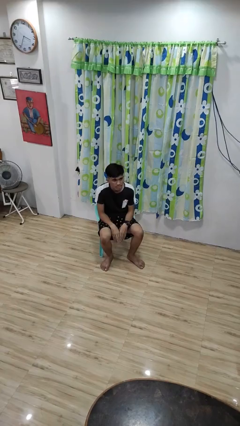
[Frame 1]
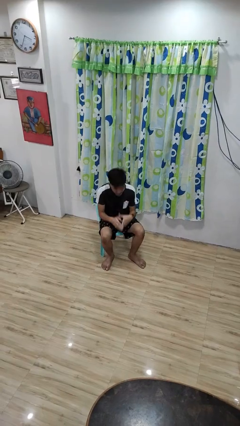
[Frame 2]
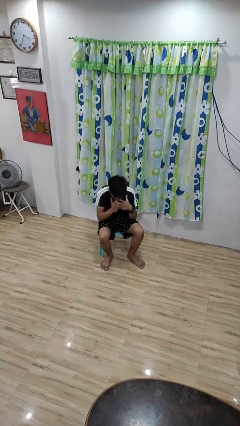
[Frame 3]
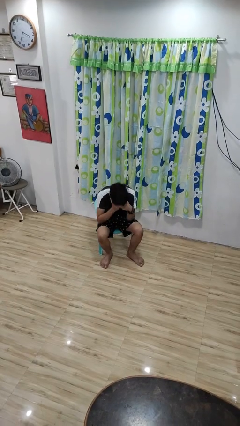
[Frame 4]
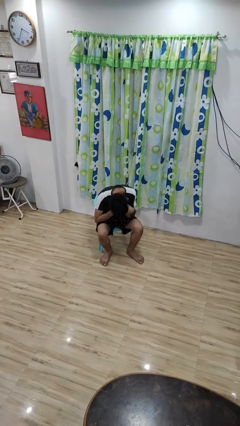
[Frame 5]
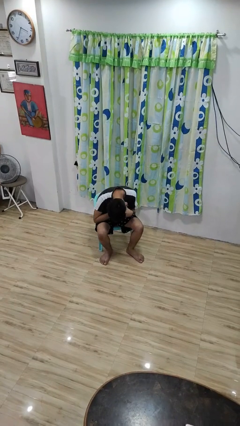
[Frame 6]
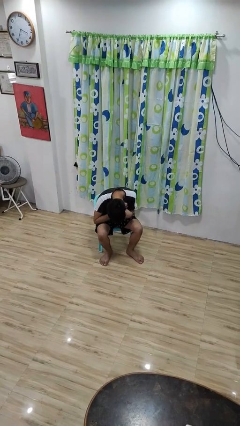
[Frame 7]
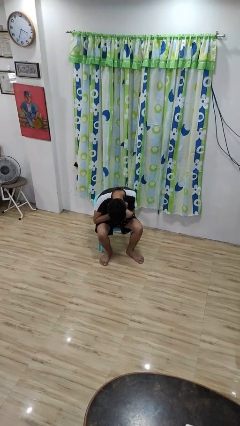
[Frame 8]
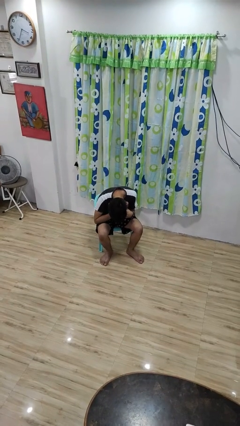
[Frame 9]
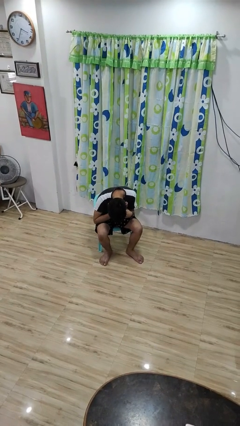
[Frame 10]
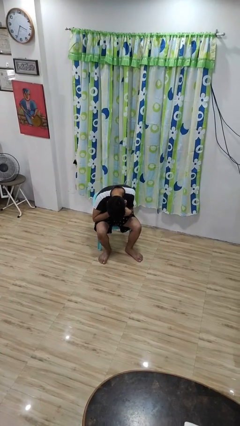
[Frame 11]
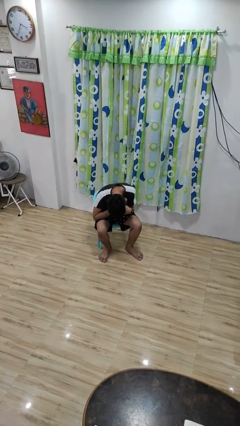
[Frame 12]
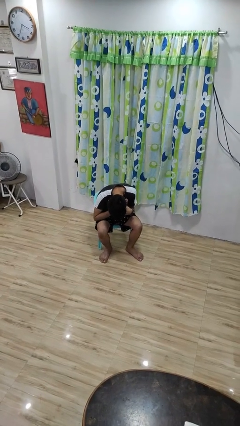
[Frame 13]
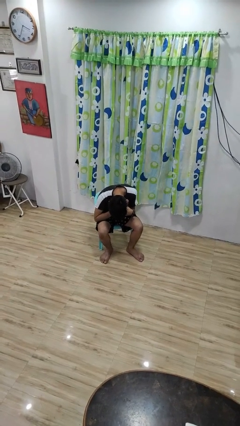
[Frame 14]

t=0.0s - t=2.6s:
person covers face with hands

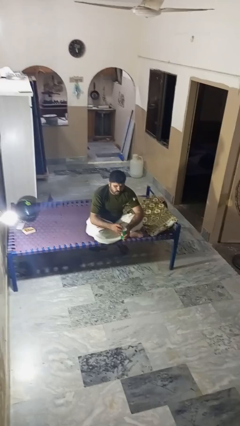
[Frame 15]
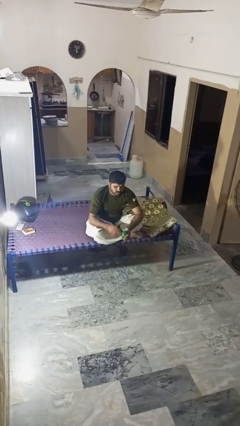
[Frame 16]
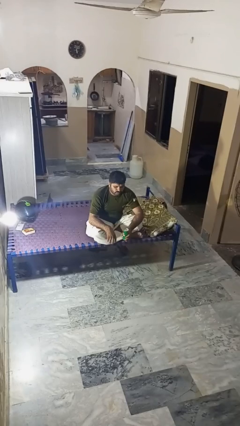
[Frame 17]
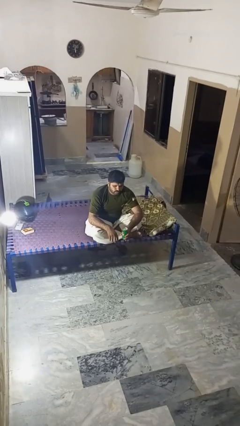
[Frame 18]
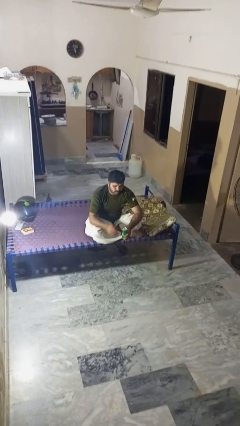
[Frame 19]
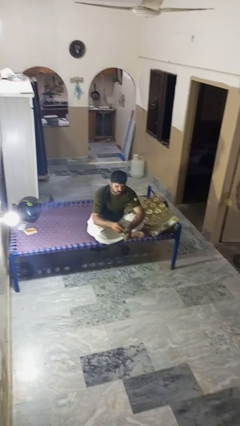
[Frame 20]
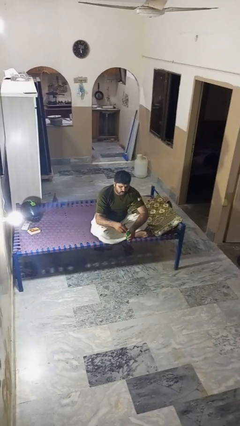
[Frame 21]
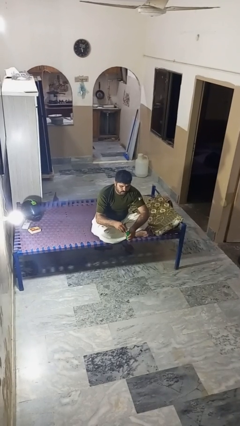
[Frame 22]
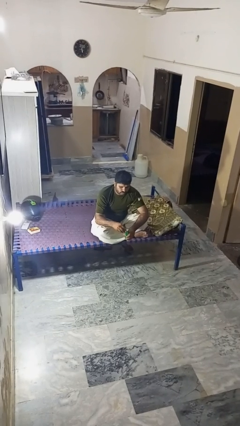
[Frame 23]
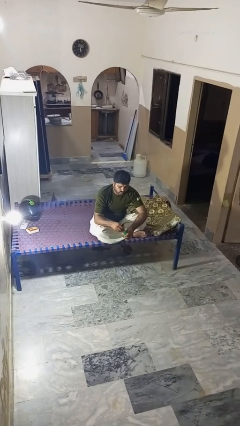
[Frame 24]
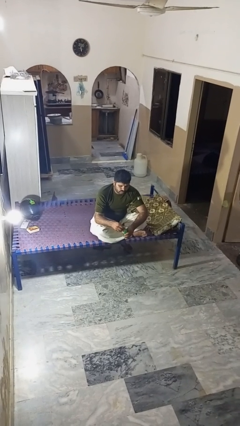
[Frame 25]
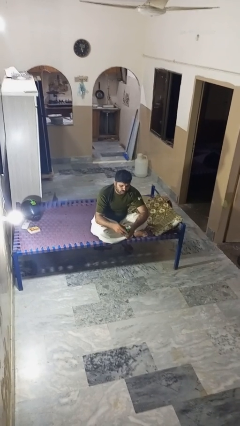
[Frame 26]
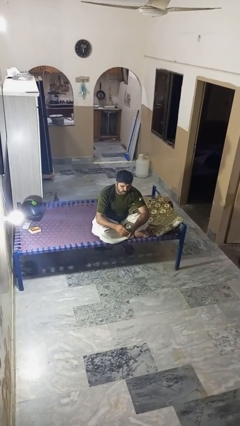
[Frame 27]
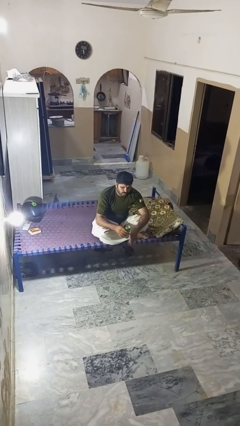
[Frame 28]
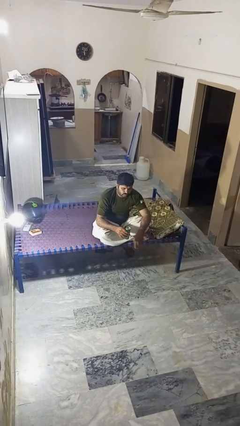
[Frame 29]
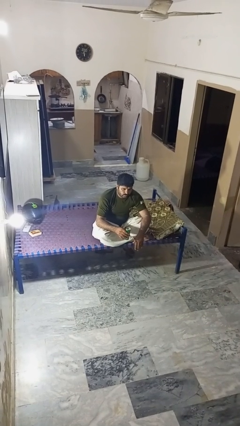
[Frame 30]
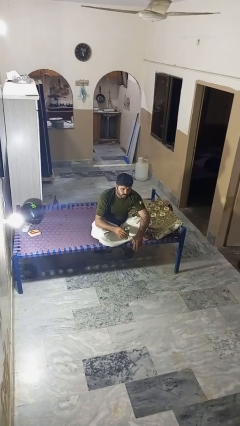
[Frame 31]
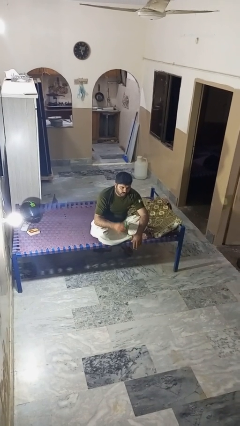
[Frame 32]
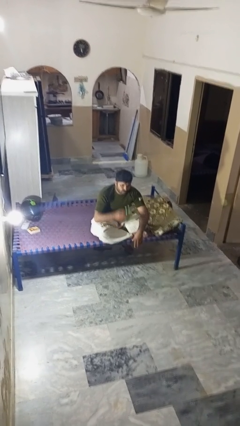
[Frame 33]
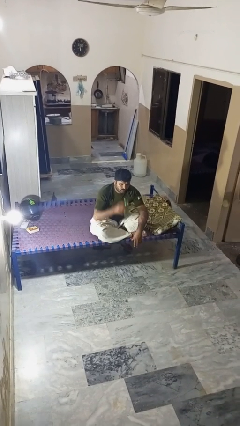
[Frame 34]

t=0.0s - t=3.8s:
person opens beverage can

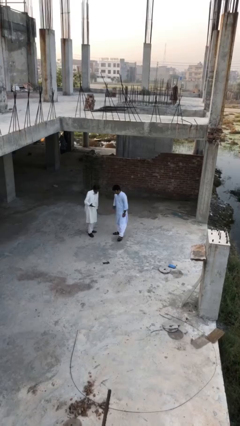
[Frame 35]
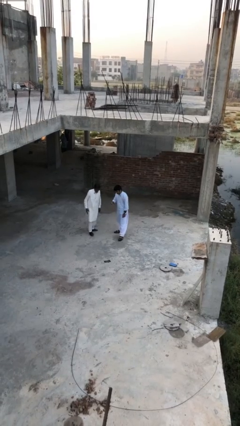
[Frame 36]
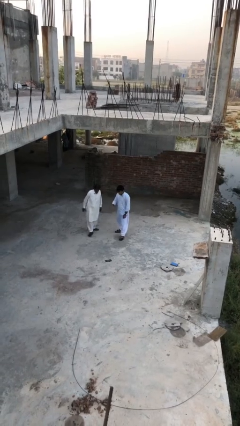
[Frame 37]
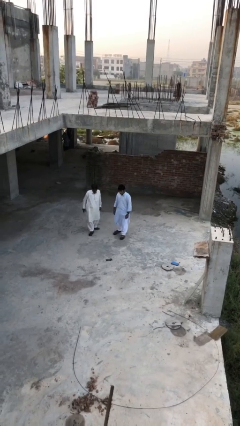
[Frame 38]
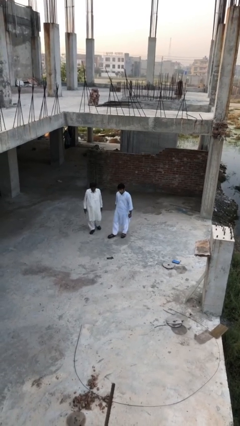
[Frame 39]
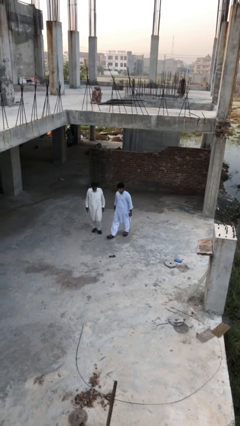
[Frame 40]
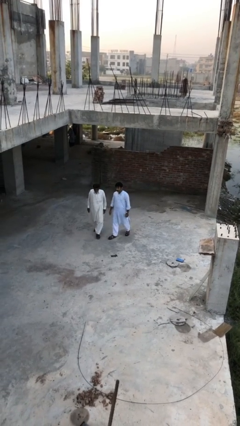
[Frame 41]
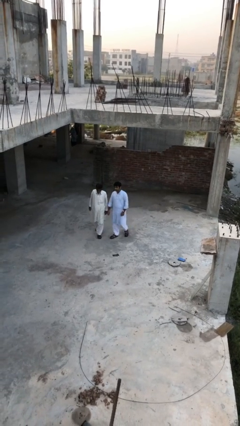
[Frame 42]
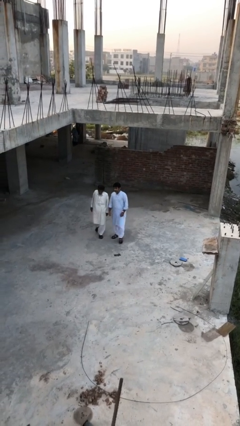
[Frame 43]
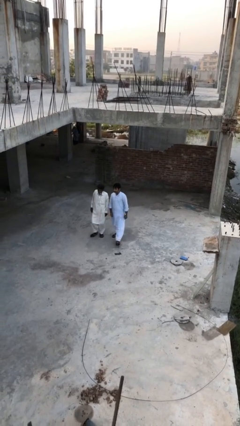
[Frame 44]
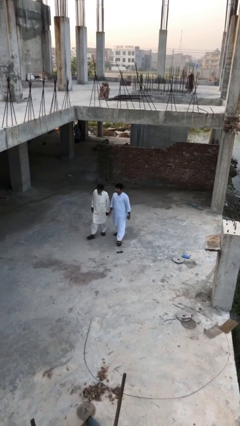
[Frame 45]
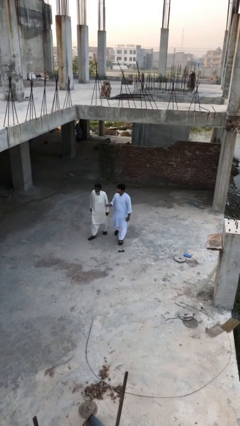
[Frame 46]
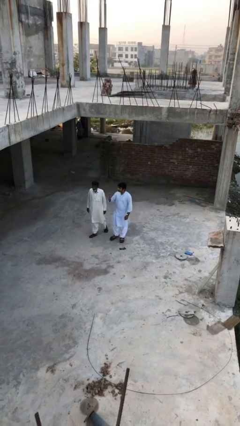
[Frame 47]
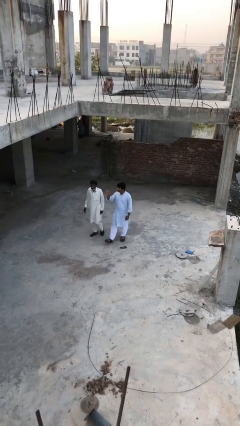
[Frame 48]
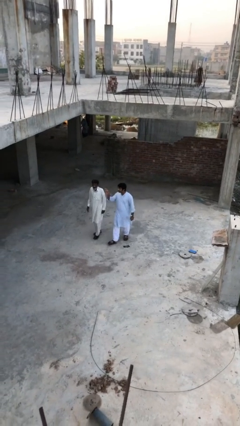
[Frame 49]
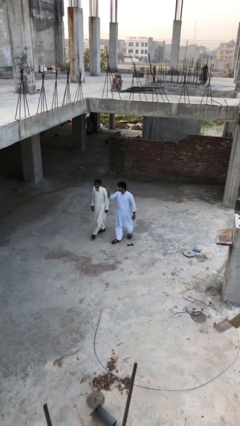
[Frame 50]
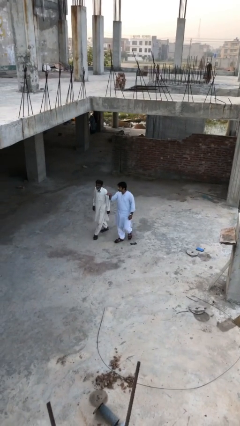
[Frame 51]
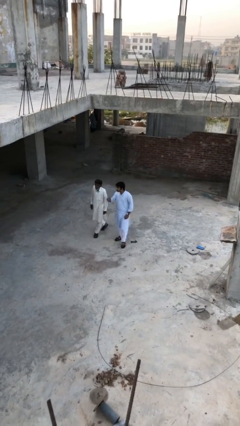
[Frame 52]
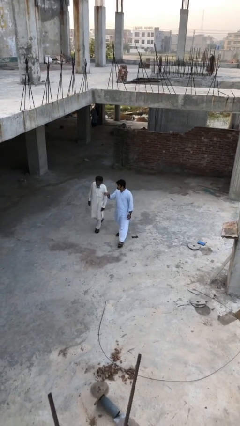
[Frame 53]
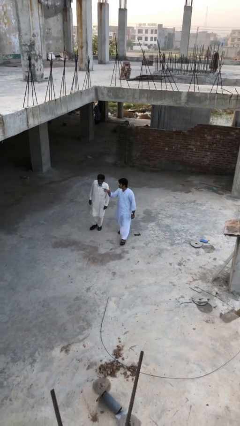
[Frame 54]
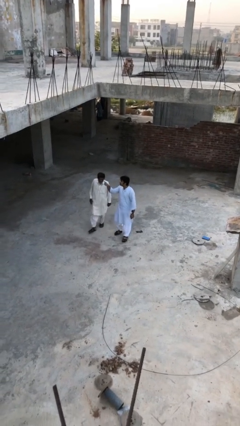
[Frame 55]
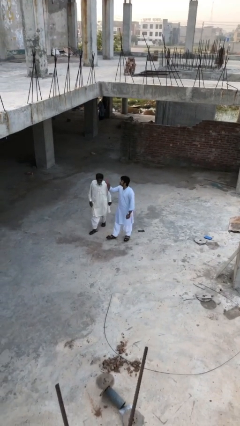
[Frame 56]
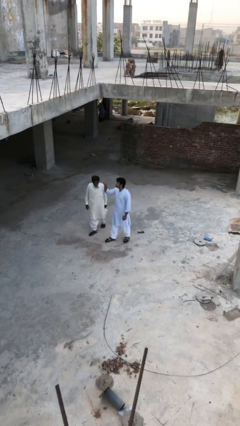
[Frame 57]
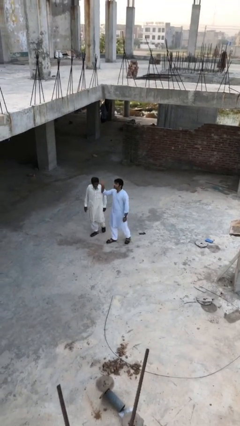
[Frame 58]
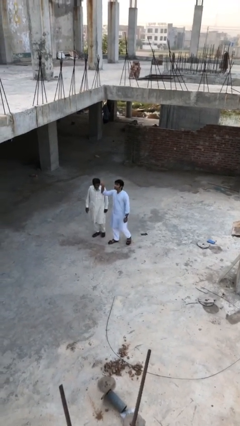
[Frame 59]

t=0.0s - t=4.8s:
person talks to person

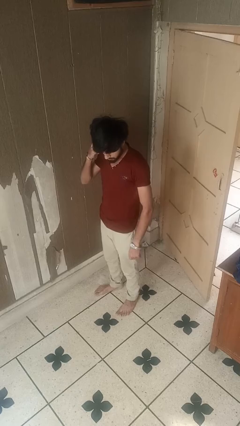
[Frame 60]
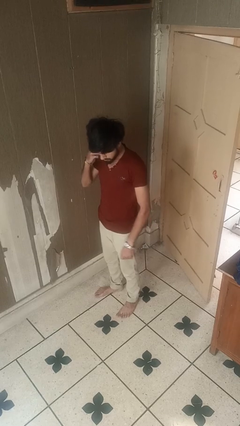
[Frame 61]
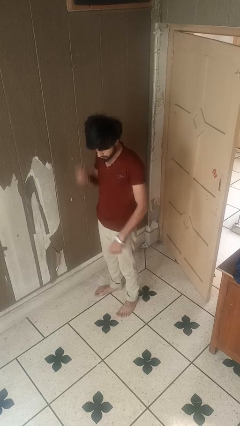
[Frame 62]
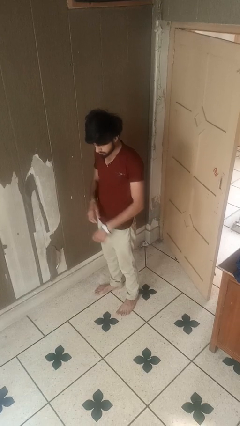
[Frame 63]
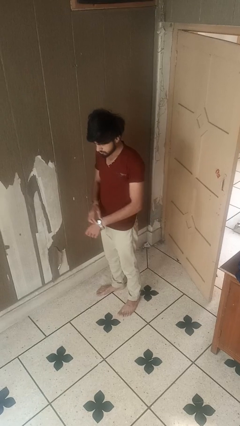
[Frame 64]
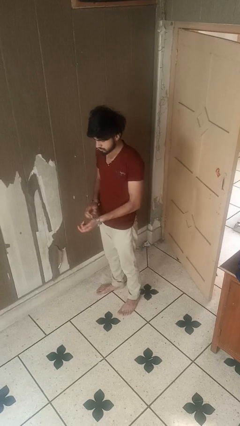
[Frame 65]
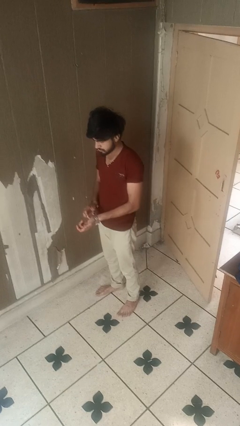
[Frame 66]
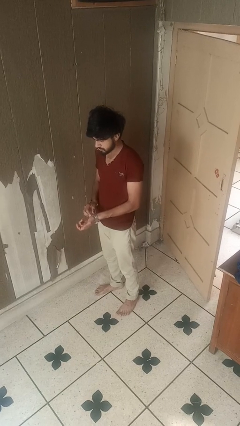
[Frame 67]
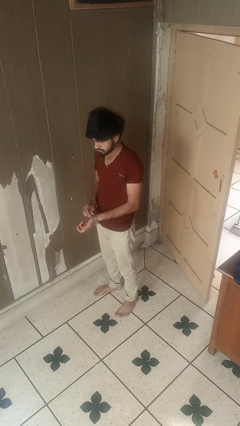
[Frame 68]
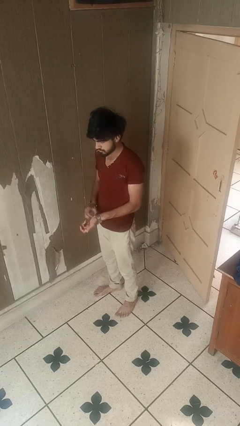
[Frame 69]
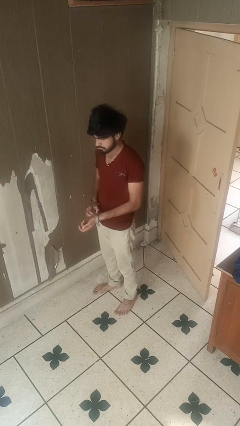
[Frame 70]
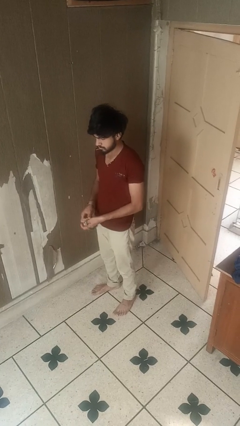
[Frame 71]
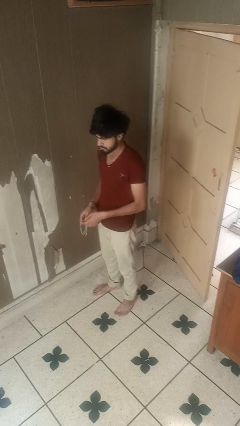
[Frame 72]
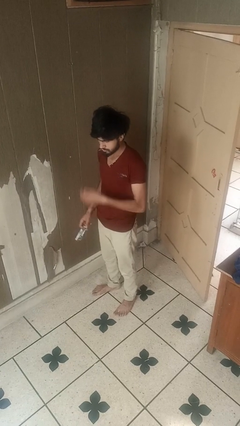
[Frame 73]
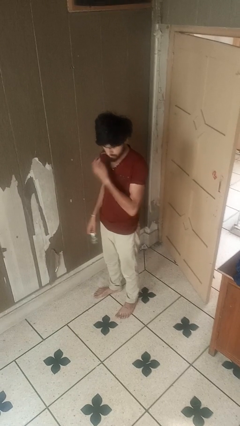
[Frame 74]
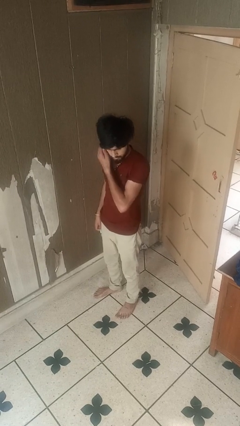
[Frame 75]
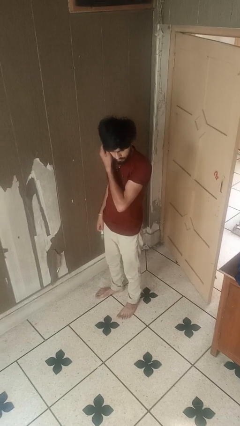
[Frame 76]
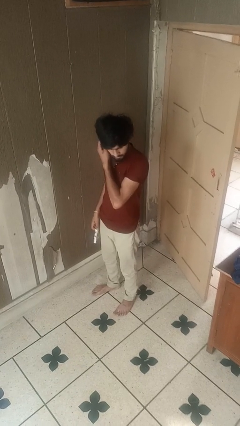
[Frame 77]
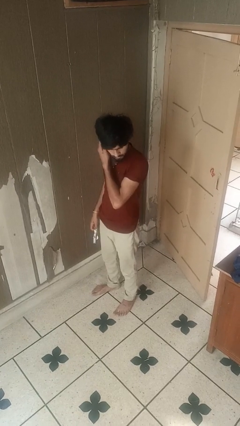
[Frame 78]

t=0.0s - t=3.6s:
person takes off wristwatch

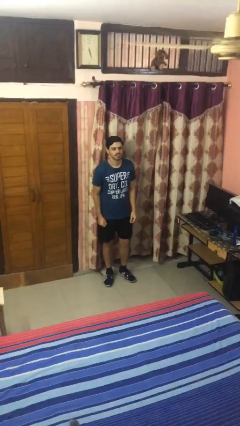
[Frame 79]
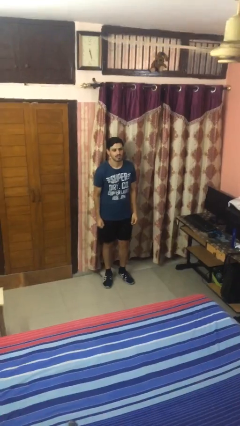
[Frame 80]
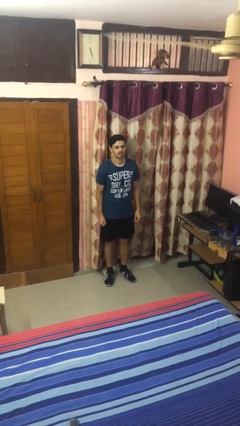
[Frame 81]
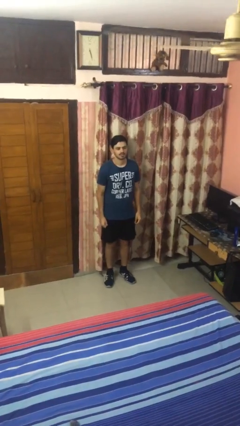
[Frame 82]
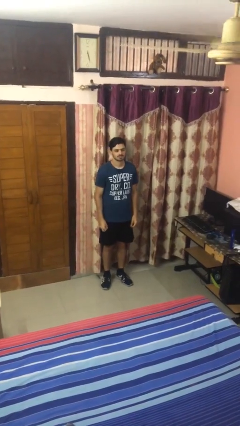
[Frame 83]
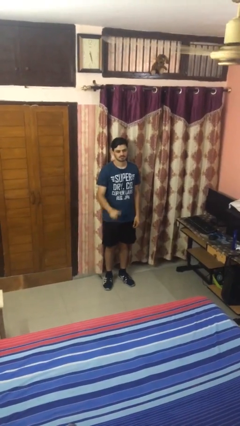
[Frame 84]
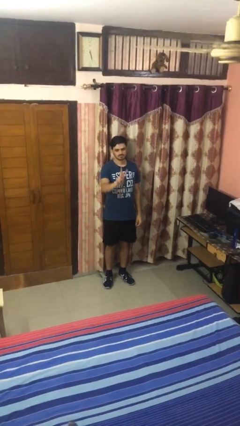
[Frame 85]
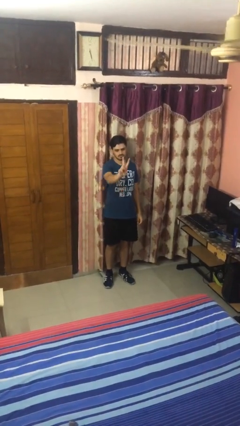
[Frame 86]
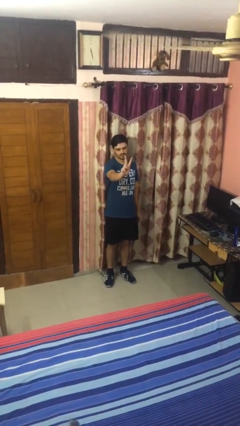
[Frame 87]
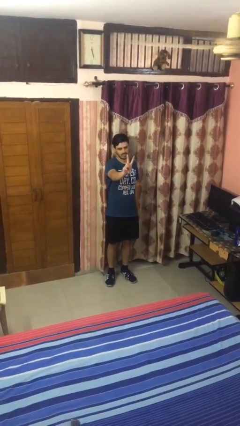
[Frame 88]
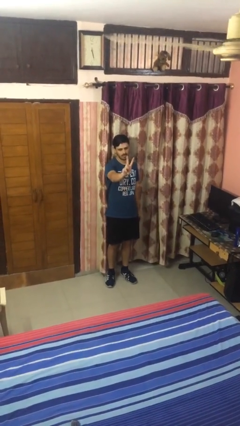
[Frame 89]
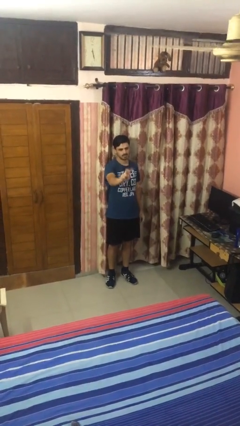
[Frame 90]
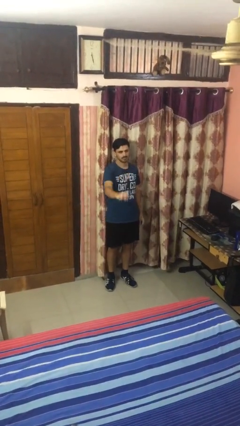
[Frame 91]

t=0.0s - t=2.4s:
person gestures peace

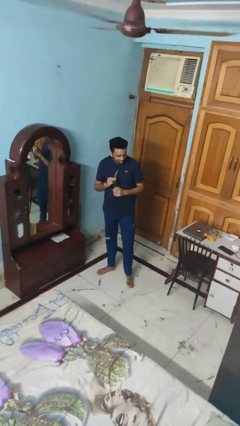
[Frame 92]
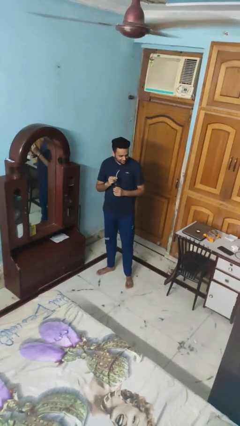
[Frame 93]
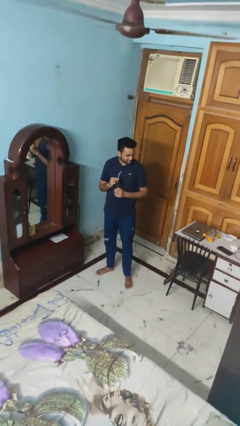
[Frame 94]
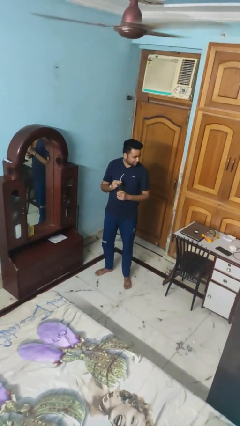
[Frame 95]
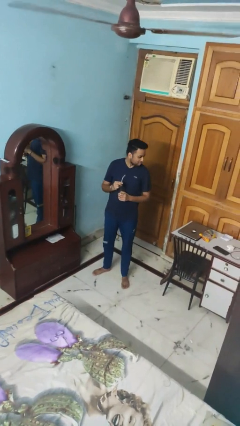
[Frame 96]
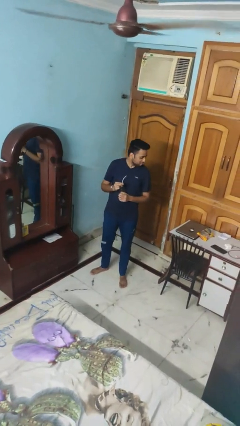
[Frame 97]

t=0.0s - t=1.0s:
person drinks from straw
